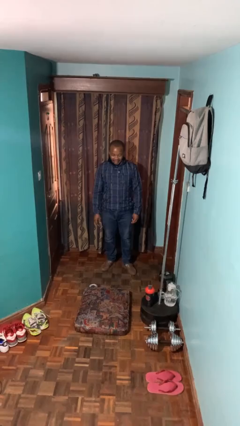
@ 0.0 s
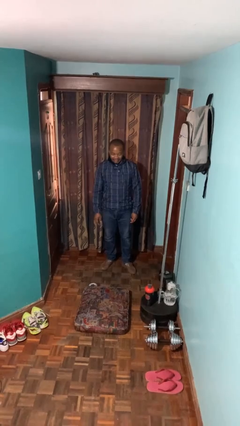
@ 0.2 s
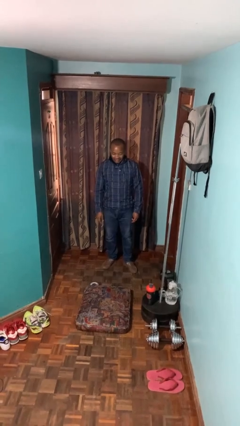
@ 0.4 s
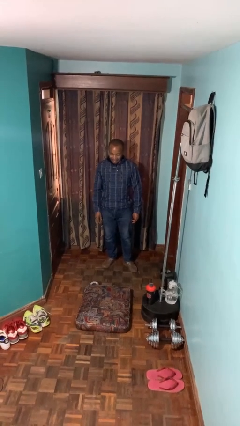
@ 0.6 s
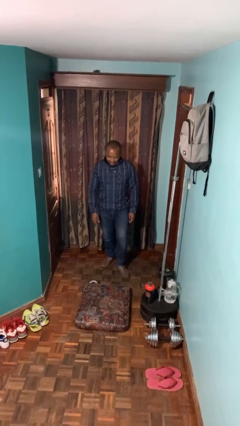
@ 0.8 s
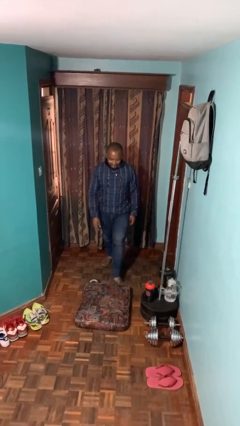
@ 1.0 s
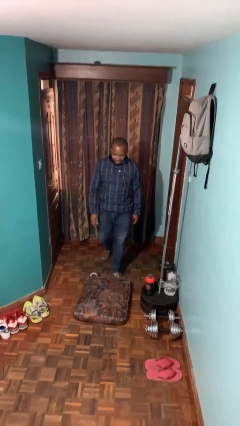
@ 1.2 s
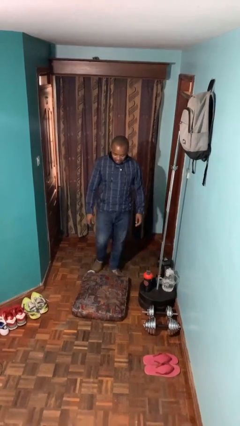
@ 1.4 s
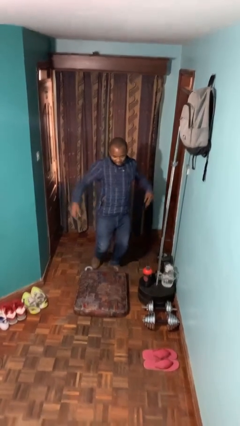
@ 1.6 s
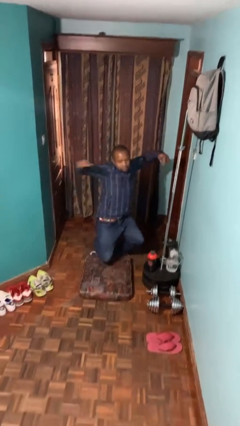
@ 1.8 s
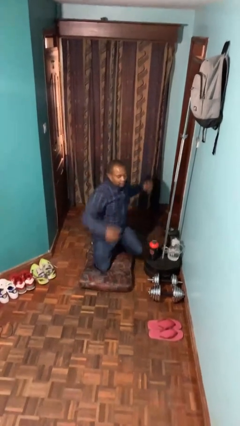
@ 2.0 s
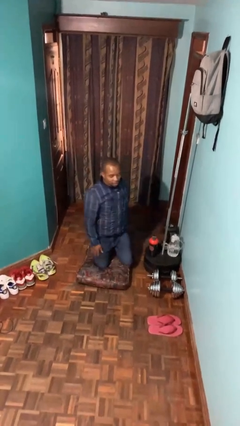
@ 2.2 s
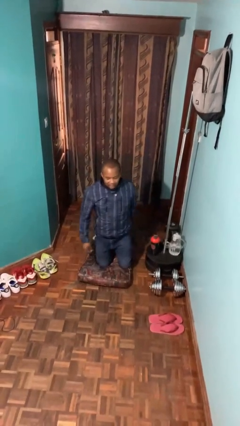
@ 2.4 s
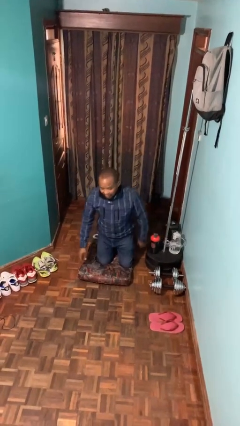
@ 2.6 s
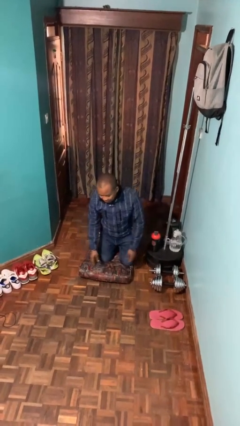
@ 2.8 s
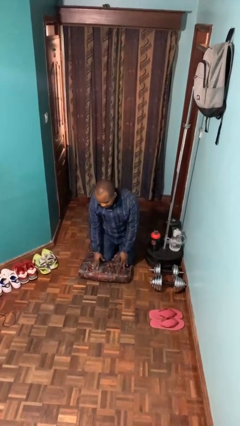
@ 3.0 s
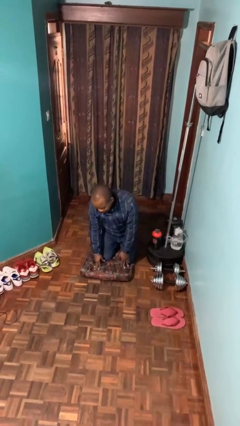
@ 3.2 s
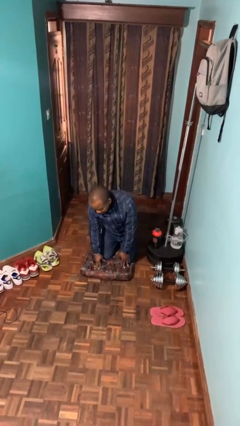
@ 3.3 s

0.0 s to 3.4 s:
person trips on object on floor

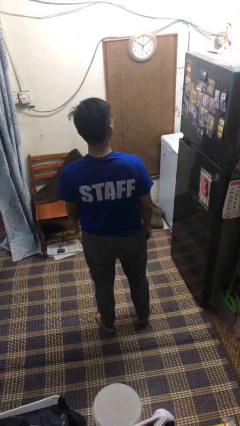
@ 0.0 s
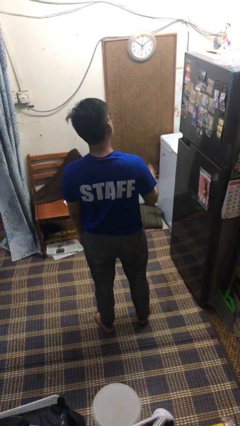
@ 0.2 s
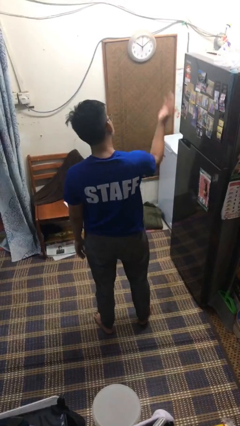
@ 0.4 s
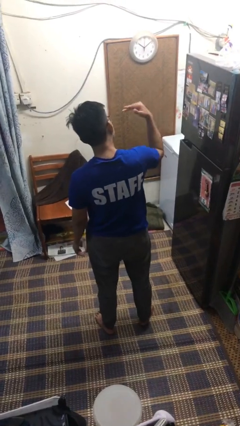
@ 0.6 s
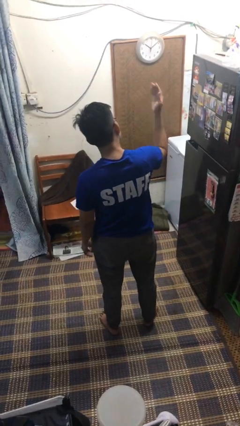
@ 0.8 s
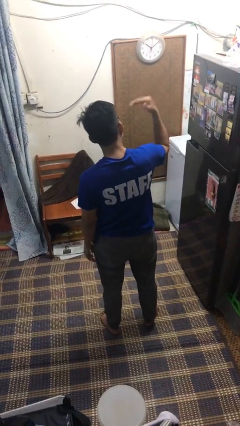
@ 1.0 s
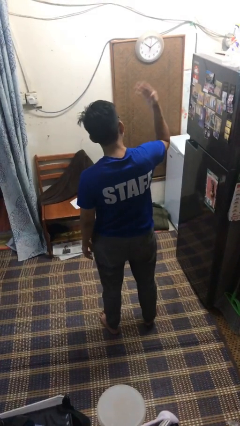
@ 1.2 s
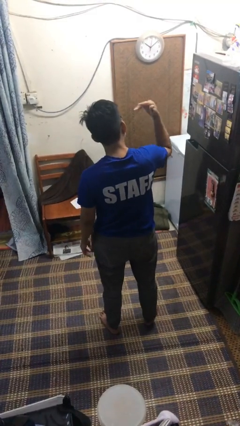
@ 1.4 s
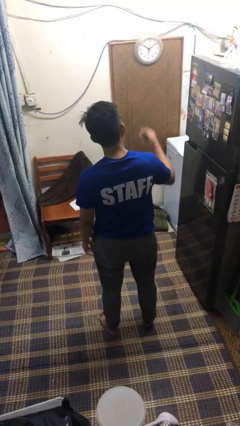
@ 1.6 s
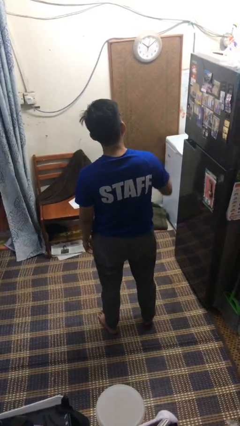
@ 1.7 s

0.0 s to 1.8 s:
person gestures come here

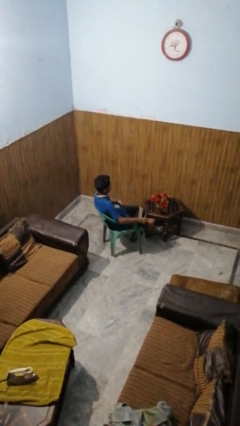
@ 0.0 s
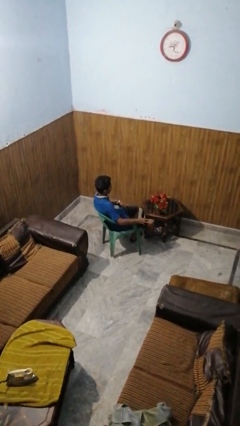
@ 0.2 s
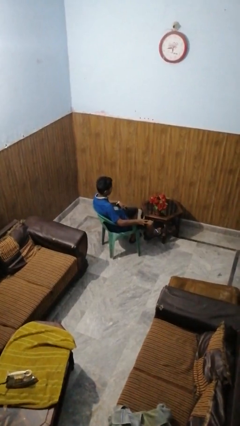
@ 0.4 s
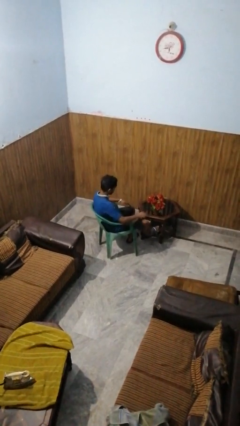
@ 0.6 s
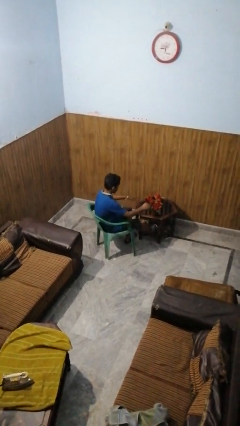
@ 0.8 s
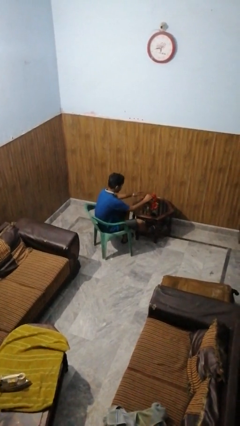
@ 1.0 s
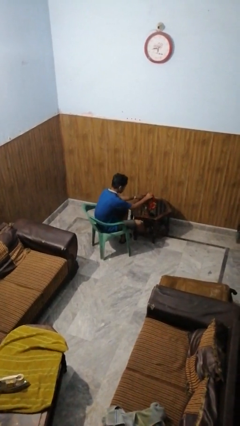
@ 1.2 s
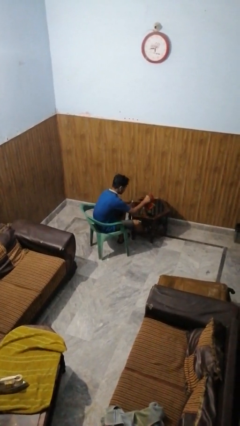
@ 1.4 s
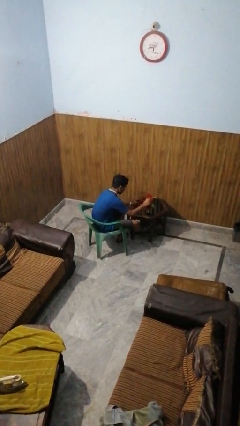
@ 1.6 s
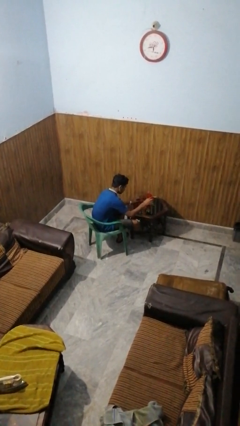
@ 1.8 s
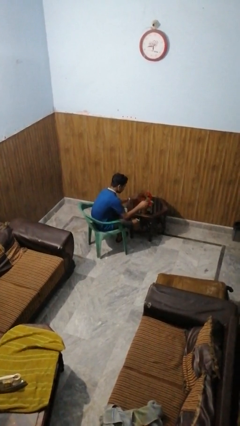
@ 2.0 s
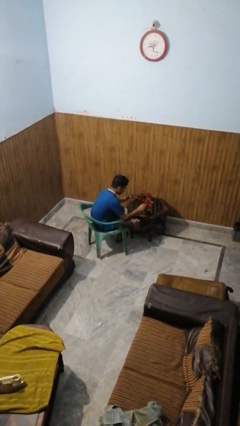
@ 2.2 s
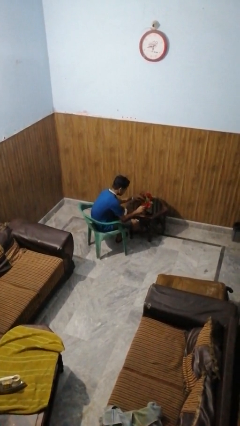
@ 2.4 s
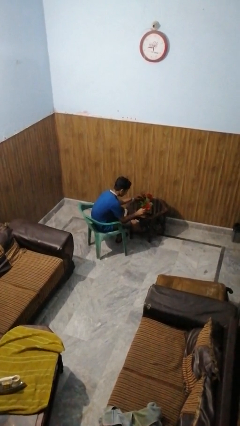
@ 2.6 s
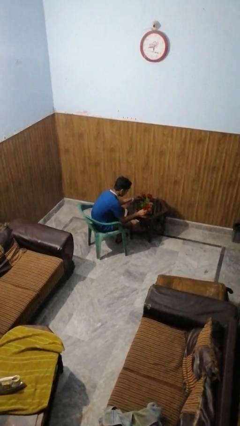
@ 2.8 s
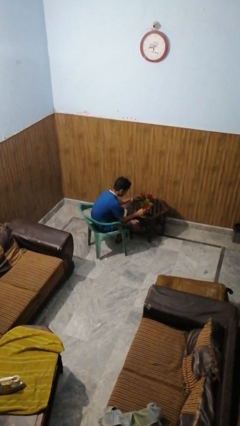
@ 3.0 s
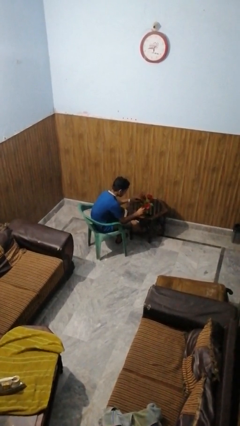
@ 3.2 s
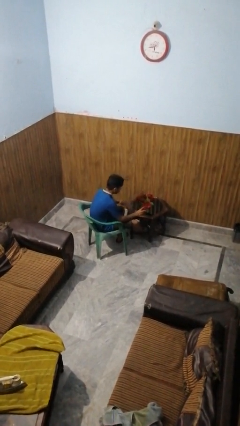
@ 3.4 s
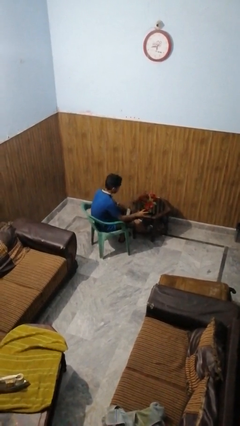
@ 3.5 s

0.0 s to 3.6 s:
person arranges flowers in vase

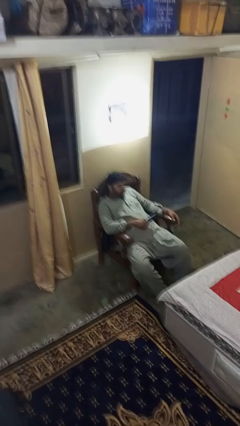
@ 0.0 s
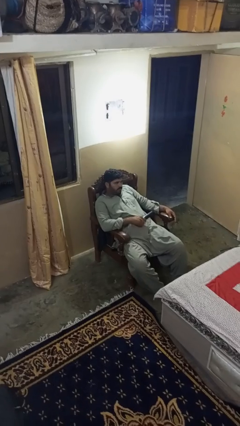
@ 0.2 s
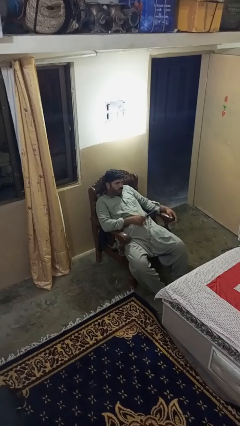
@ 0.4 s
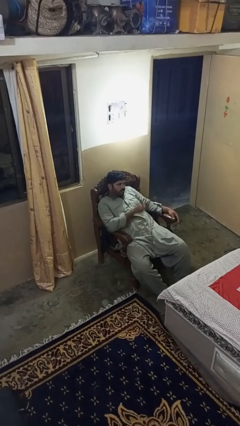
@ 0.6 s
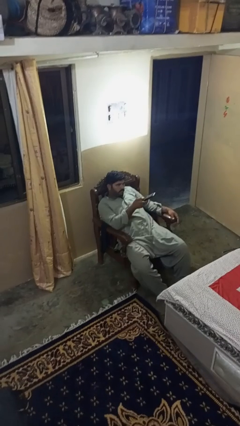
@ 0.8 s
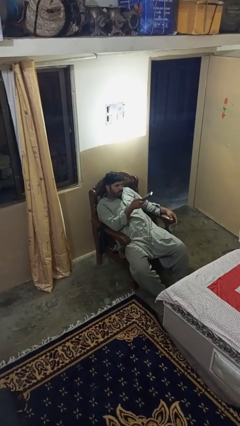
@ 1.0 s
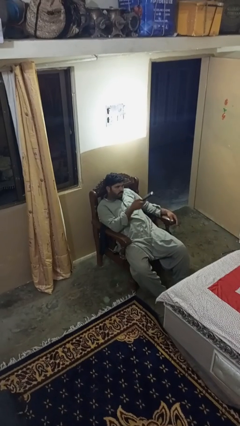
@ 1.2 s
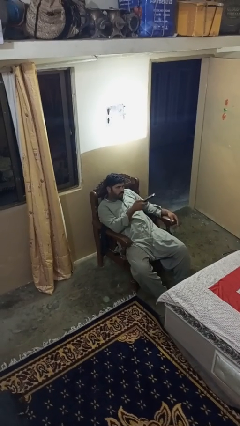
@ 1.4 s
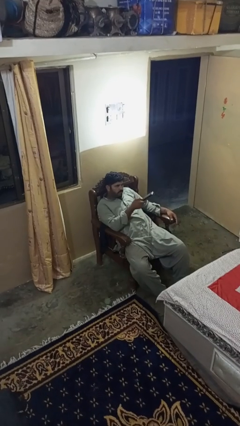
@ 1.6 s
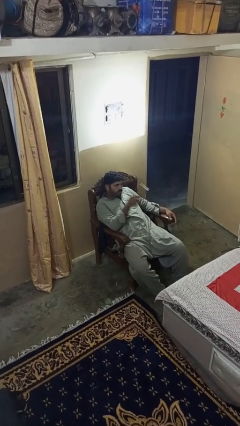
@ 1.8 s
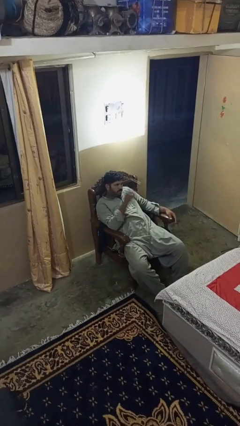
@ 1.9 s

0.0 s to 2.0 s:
person uses television remote

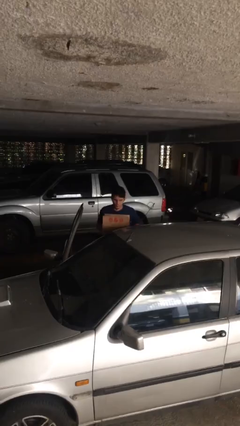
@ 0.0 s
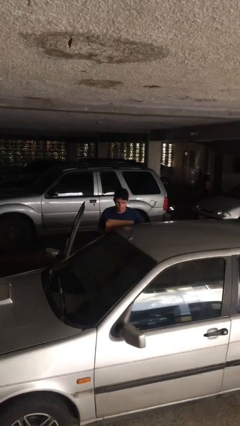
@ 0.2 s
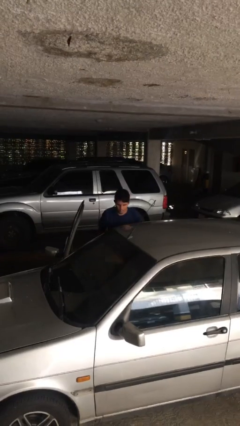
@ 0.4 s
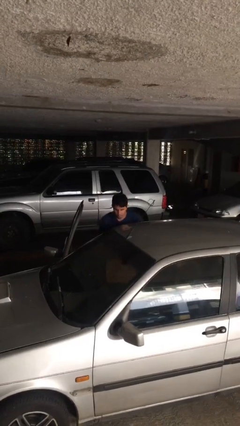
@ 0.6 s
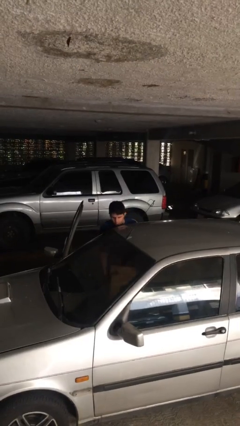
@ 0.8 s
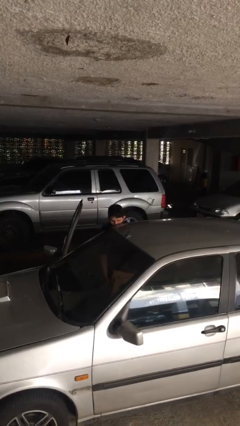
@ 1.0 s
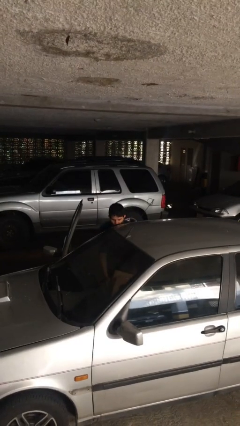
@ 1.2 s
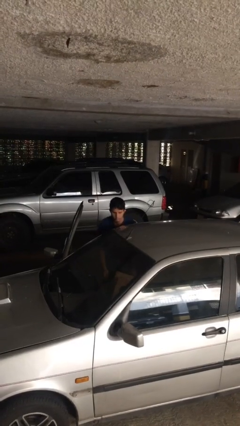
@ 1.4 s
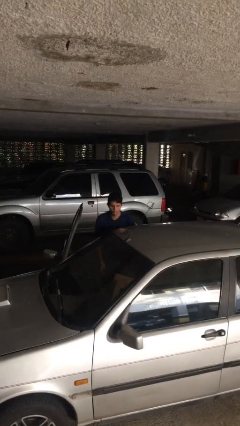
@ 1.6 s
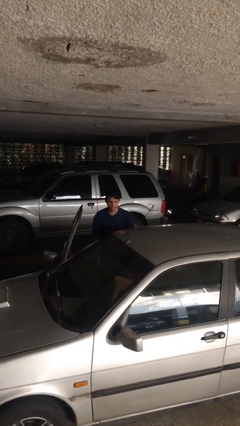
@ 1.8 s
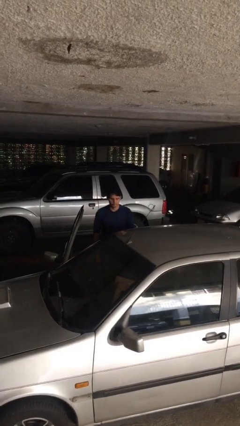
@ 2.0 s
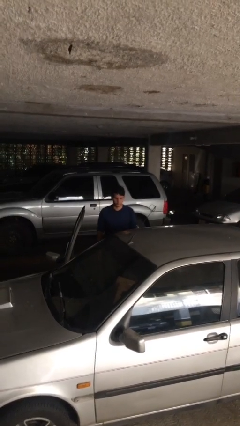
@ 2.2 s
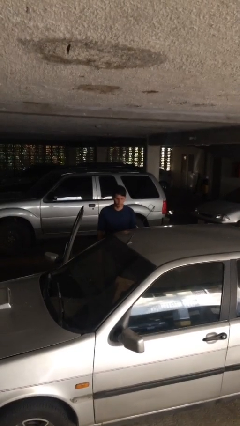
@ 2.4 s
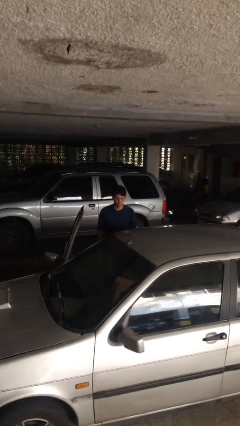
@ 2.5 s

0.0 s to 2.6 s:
person loads car

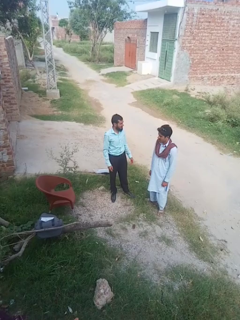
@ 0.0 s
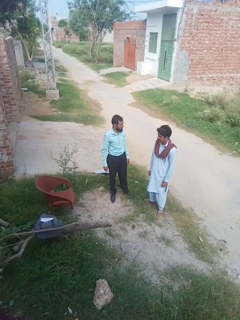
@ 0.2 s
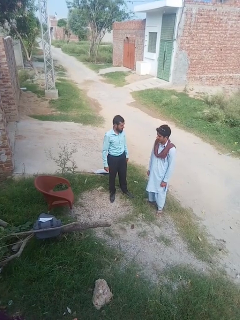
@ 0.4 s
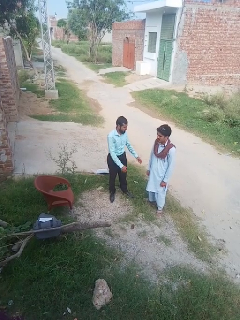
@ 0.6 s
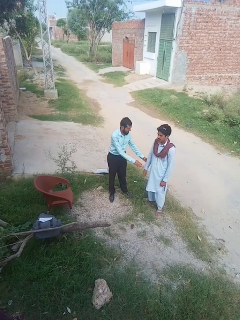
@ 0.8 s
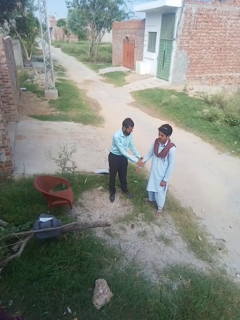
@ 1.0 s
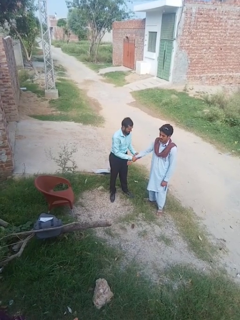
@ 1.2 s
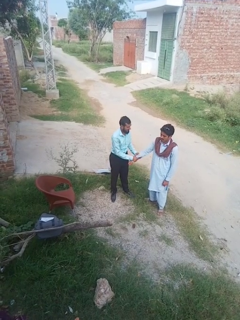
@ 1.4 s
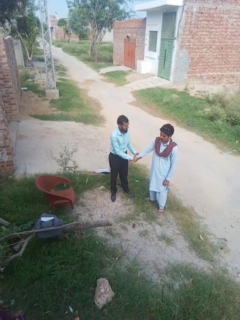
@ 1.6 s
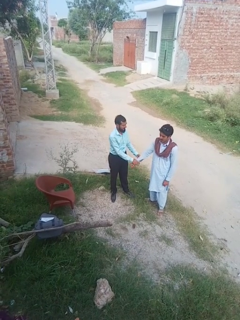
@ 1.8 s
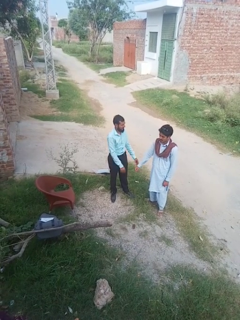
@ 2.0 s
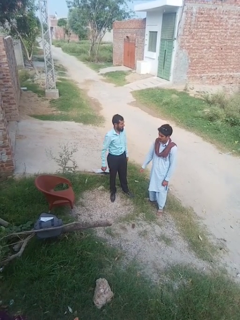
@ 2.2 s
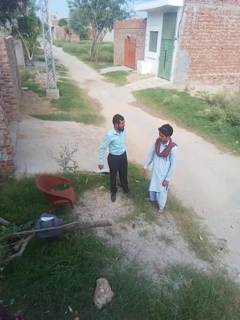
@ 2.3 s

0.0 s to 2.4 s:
person grabs person by forearm

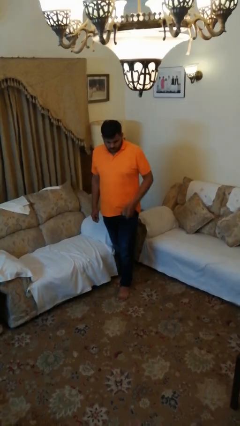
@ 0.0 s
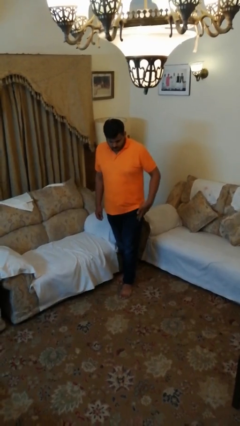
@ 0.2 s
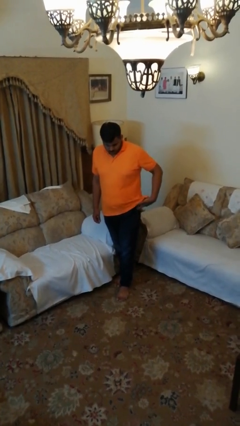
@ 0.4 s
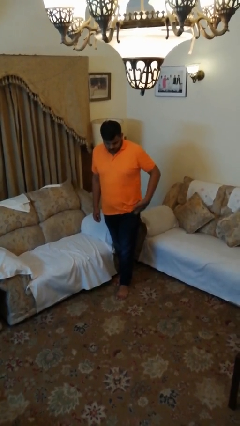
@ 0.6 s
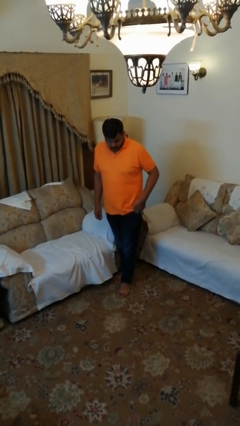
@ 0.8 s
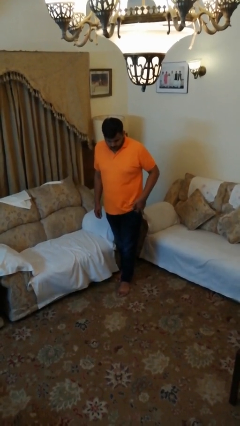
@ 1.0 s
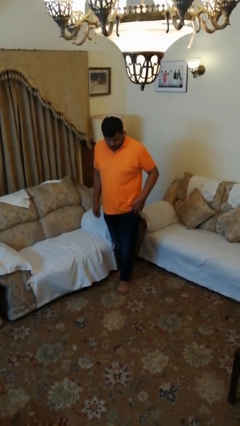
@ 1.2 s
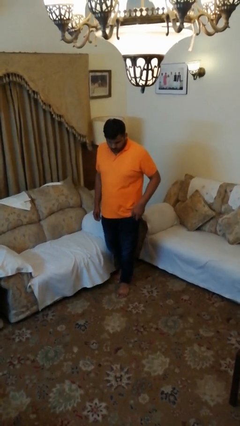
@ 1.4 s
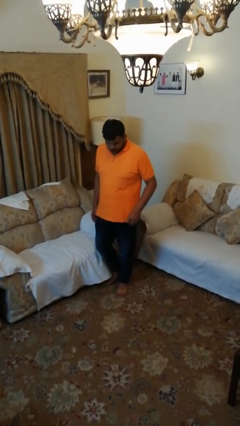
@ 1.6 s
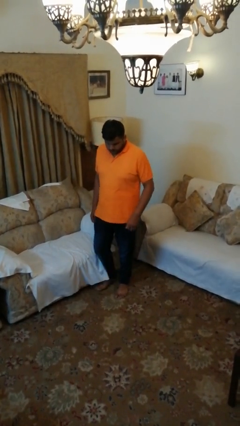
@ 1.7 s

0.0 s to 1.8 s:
person puts phone into pocket
